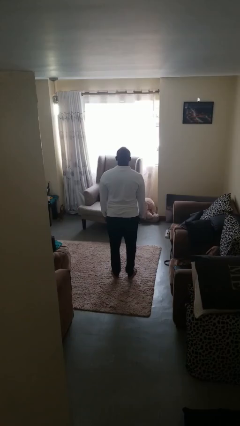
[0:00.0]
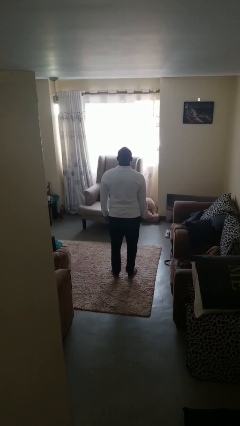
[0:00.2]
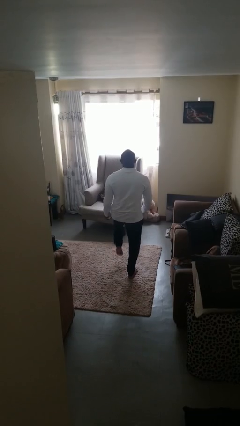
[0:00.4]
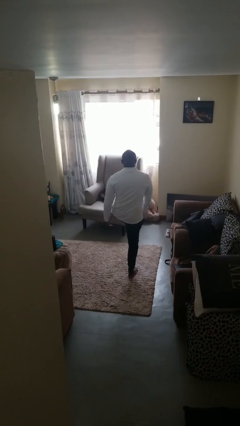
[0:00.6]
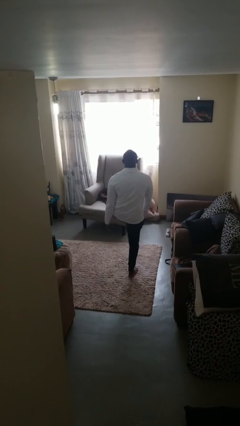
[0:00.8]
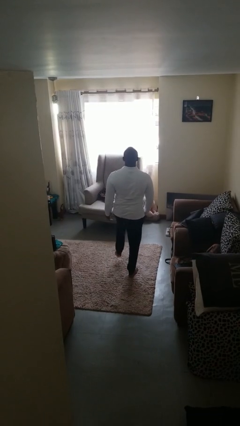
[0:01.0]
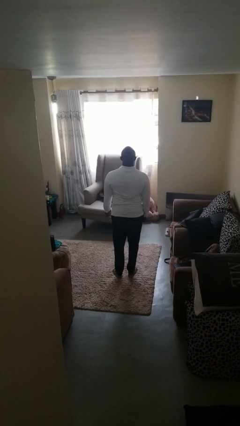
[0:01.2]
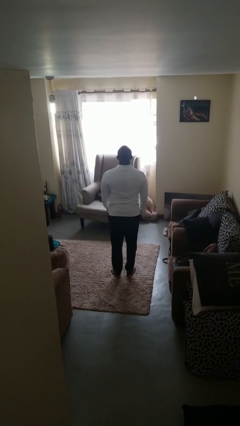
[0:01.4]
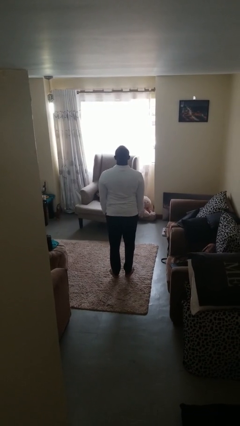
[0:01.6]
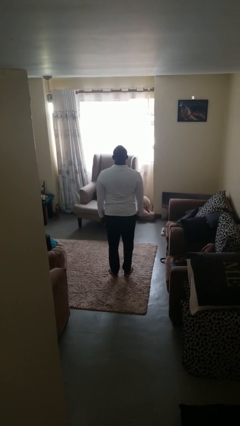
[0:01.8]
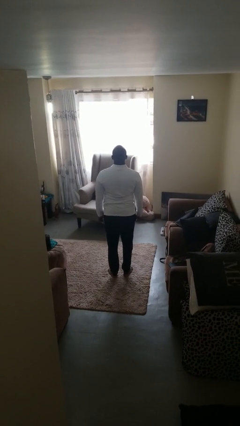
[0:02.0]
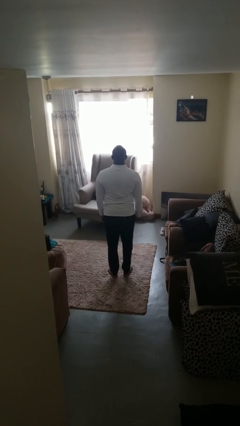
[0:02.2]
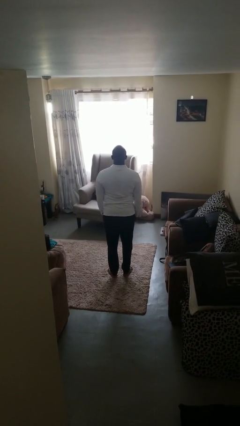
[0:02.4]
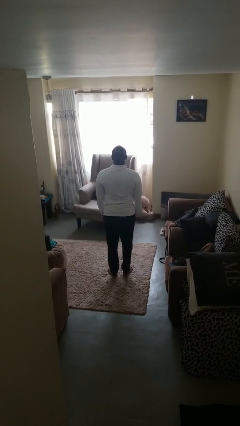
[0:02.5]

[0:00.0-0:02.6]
person karate kicks

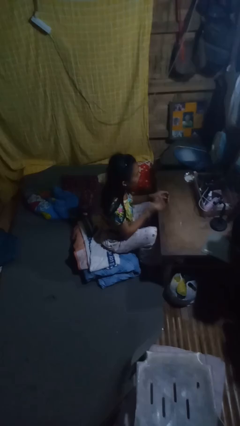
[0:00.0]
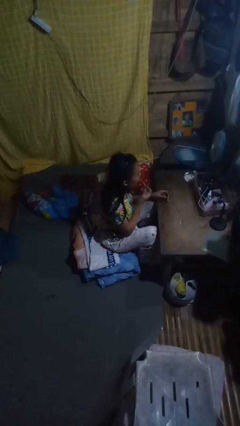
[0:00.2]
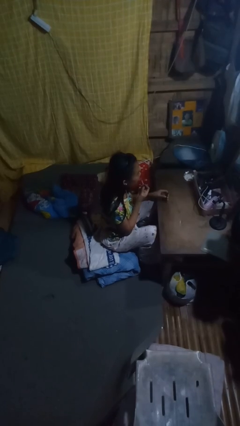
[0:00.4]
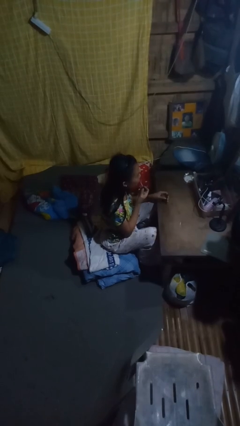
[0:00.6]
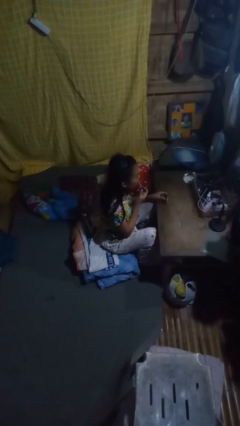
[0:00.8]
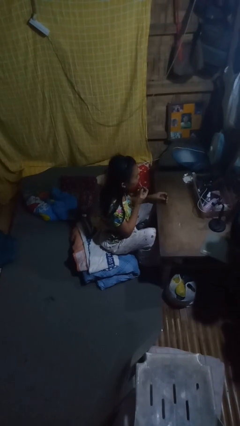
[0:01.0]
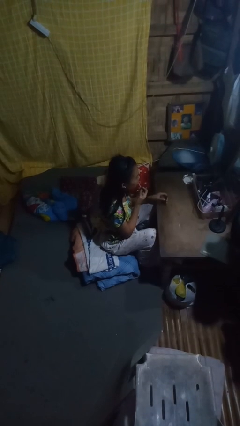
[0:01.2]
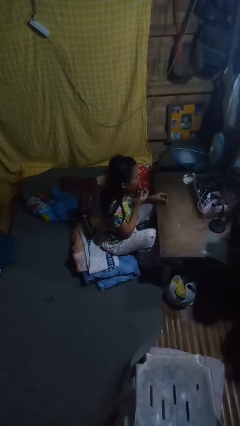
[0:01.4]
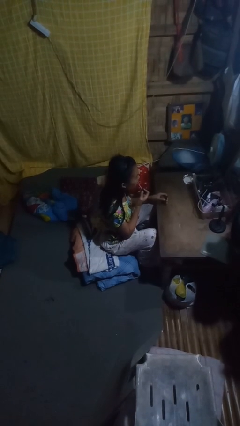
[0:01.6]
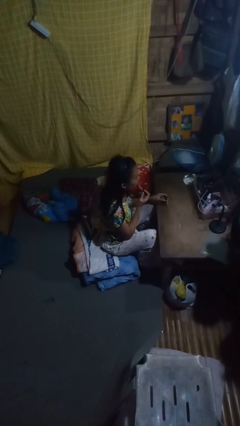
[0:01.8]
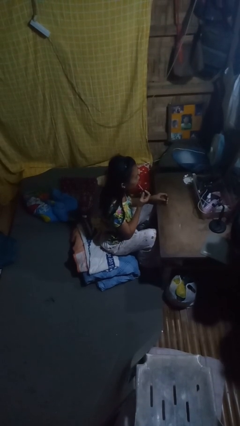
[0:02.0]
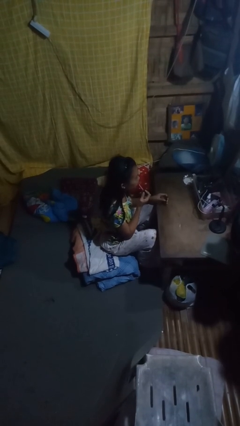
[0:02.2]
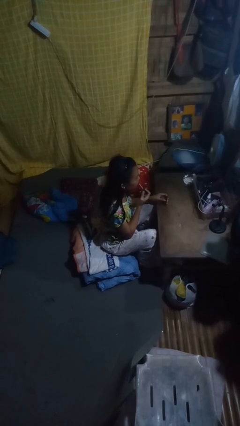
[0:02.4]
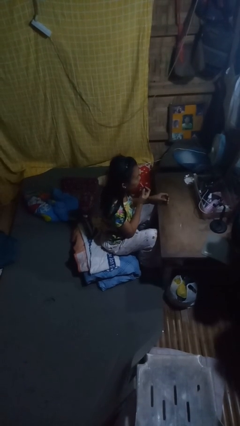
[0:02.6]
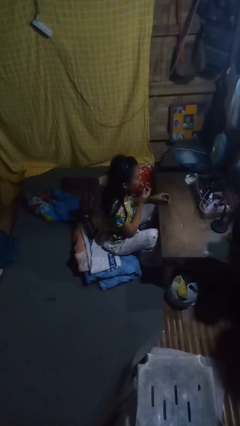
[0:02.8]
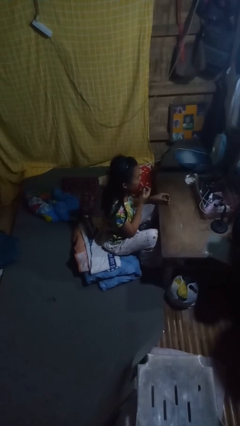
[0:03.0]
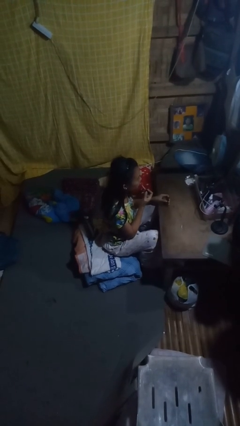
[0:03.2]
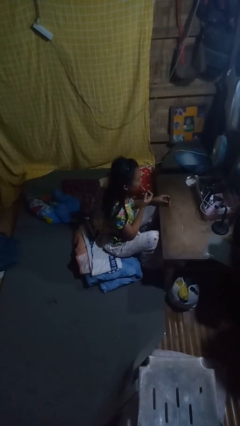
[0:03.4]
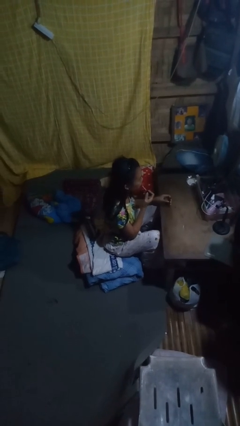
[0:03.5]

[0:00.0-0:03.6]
person applies lip makeup

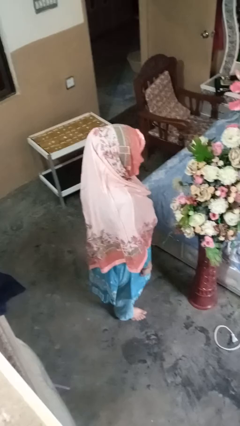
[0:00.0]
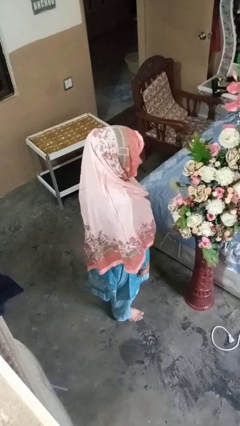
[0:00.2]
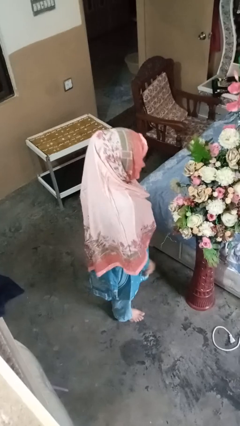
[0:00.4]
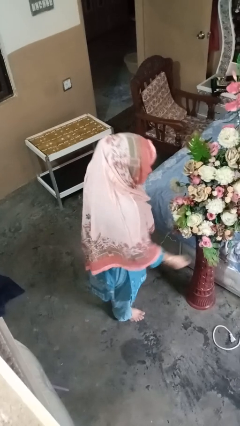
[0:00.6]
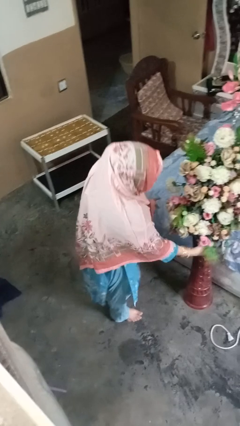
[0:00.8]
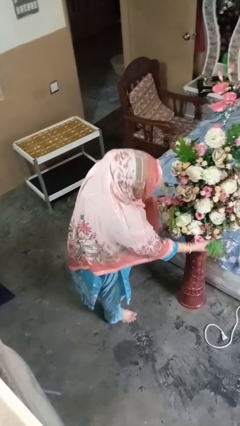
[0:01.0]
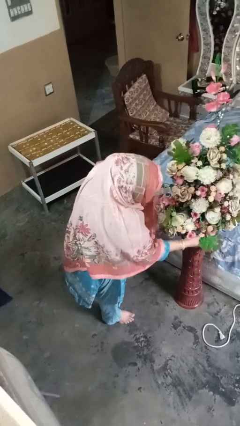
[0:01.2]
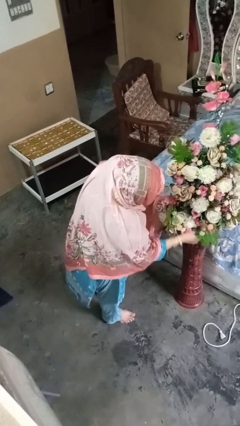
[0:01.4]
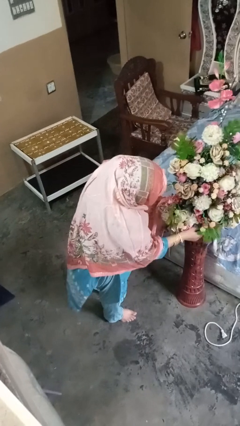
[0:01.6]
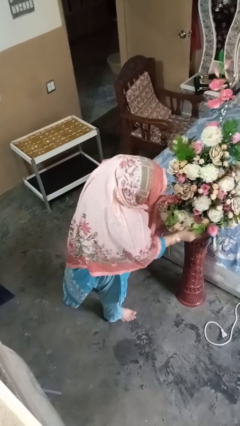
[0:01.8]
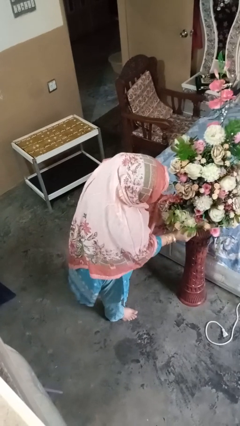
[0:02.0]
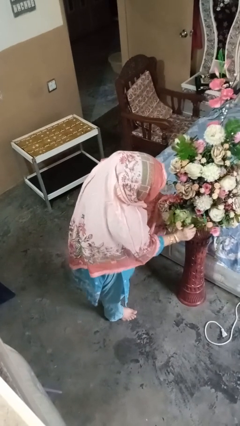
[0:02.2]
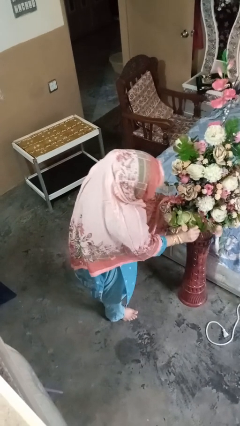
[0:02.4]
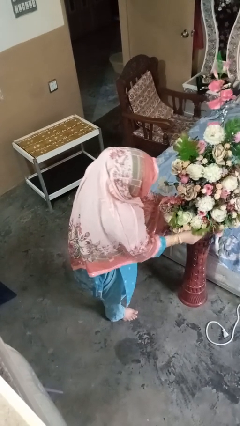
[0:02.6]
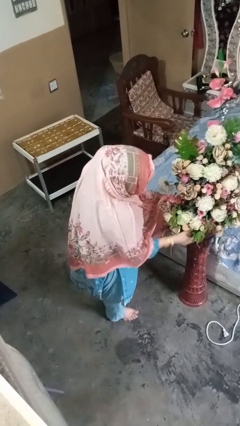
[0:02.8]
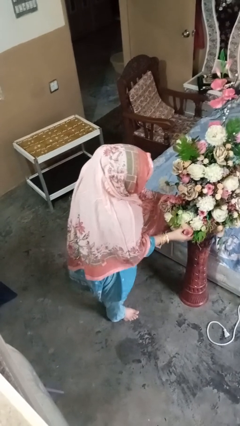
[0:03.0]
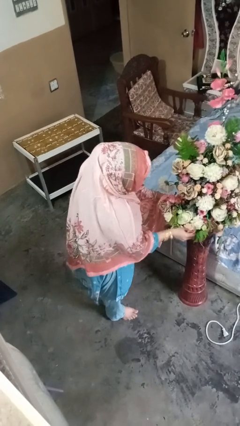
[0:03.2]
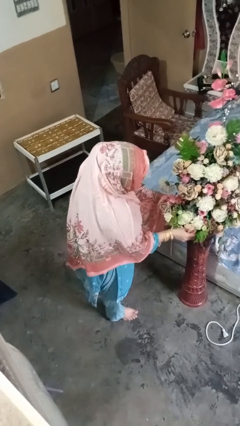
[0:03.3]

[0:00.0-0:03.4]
person arranges flowers in vase

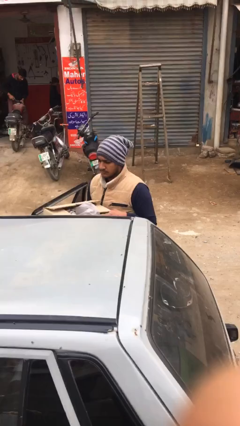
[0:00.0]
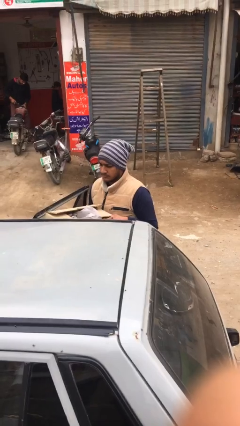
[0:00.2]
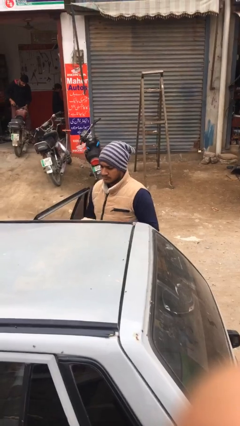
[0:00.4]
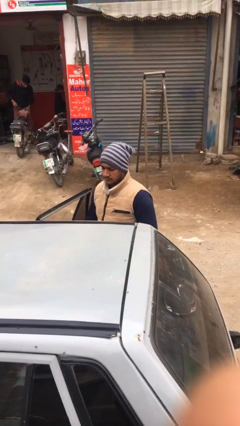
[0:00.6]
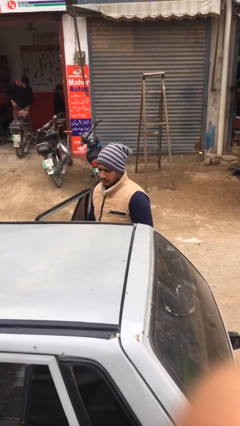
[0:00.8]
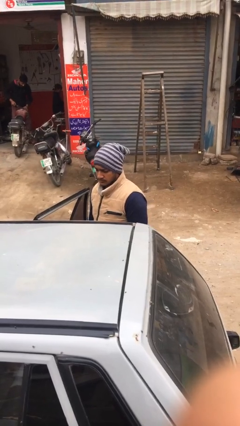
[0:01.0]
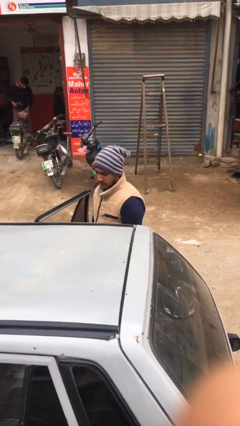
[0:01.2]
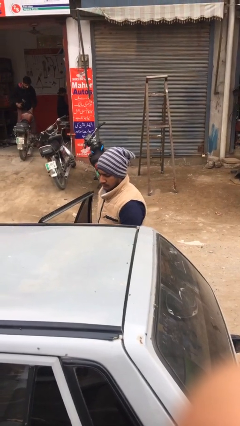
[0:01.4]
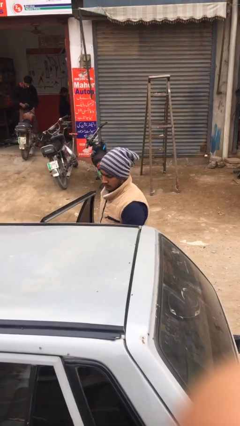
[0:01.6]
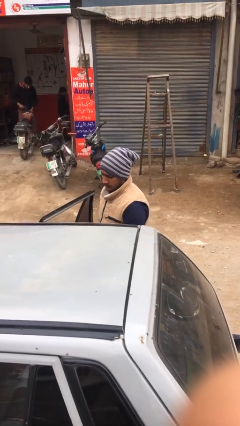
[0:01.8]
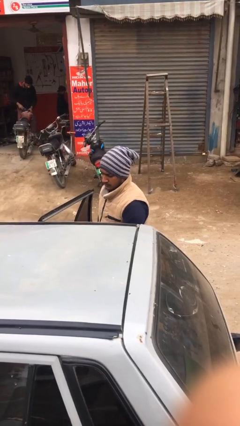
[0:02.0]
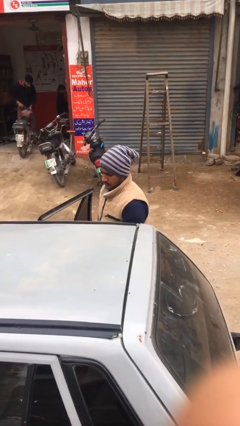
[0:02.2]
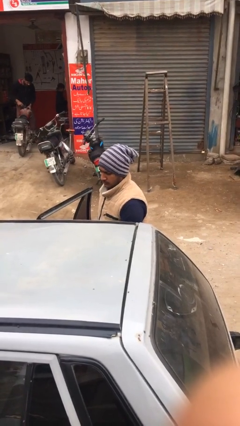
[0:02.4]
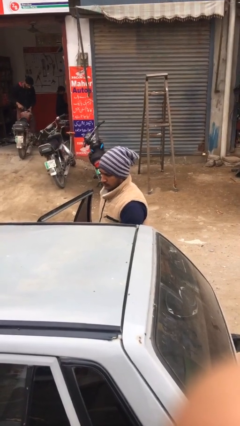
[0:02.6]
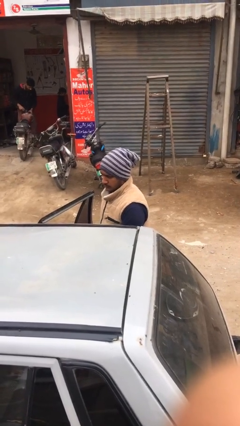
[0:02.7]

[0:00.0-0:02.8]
person loads car

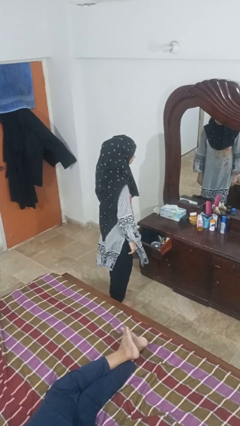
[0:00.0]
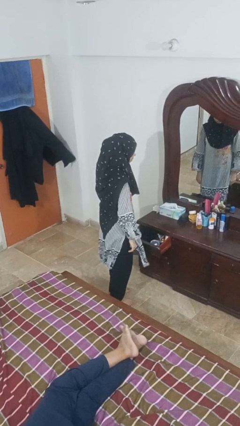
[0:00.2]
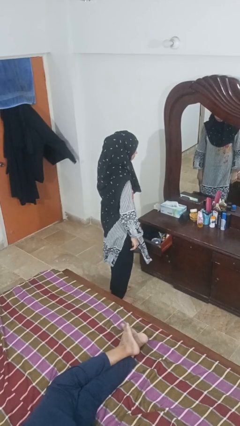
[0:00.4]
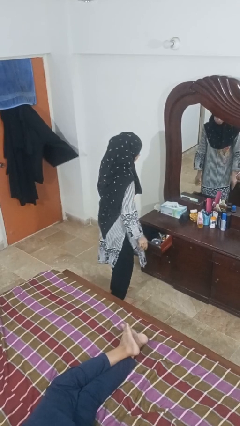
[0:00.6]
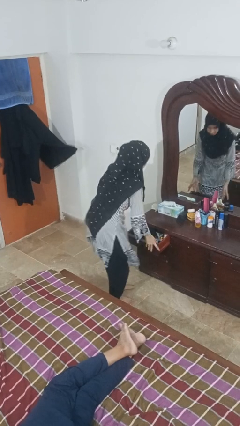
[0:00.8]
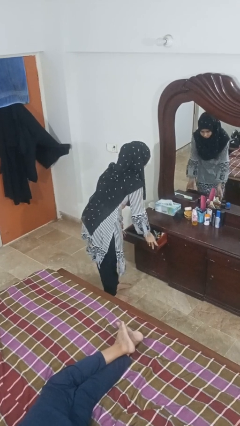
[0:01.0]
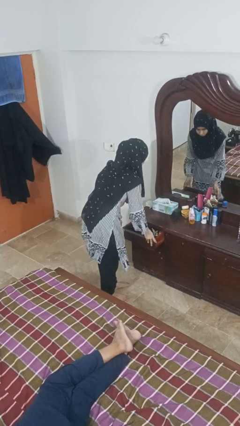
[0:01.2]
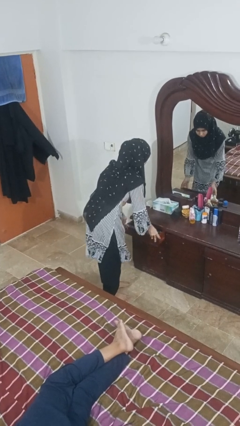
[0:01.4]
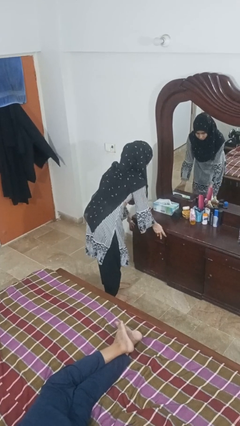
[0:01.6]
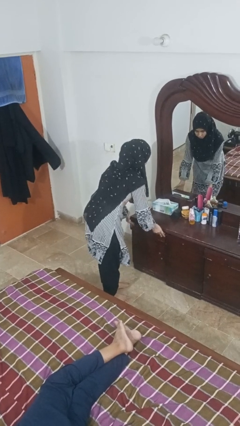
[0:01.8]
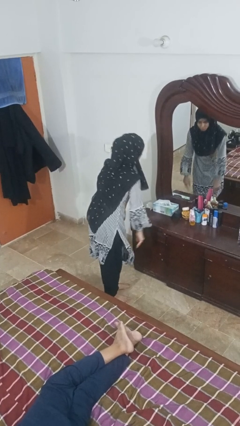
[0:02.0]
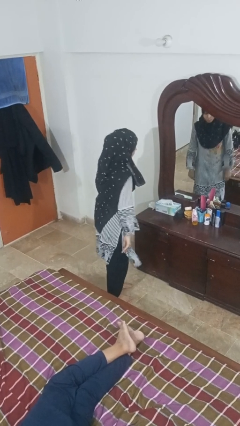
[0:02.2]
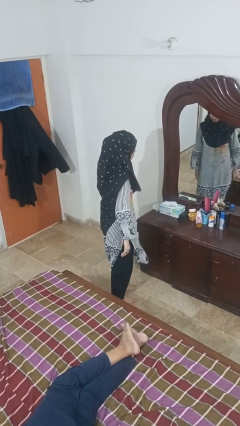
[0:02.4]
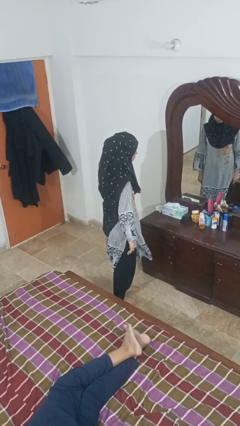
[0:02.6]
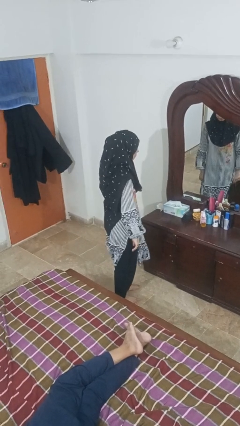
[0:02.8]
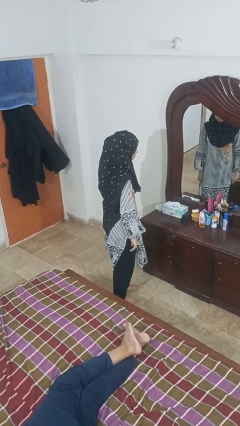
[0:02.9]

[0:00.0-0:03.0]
person closes dresser drawer

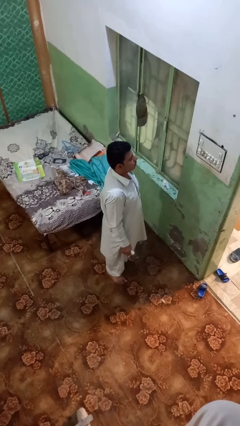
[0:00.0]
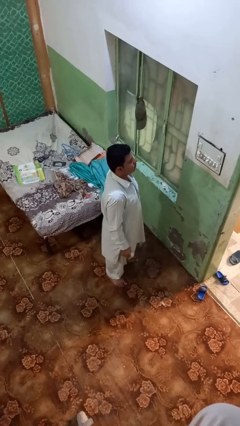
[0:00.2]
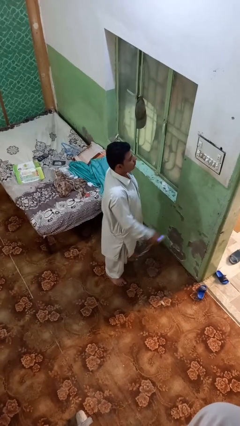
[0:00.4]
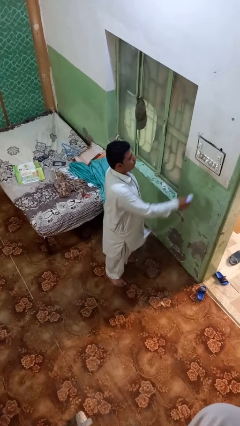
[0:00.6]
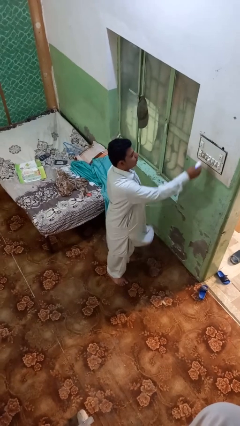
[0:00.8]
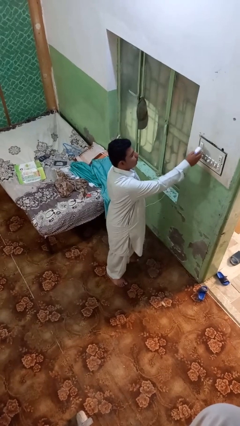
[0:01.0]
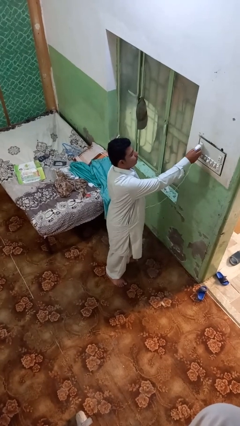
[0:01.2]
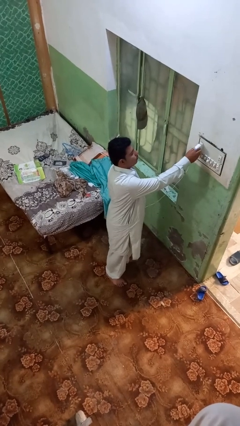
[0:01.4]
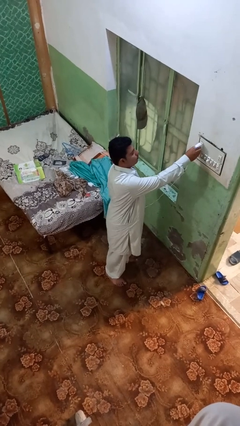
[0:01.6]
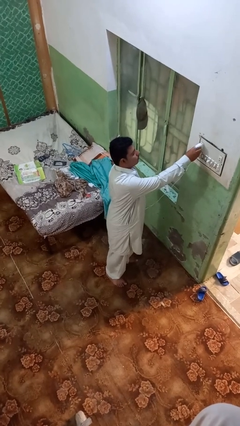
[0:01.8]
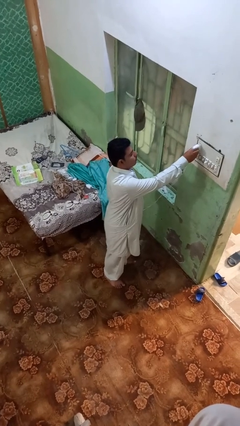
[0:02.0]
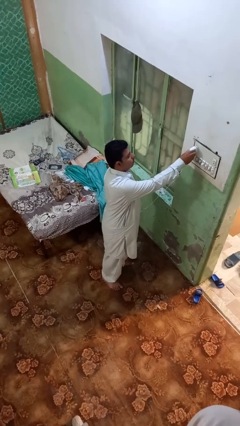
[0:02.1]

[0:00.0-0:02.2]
person plugs into electrical socket
